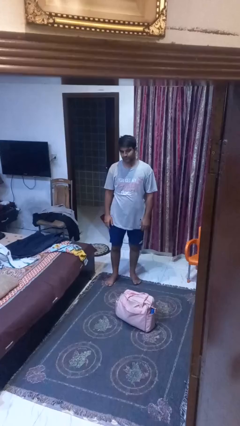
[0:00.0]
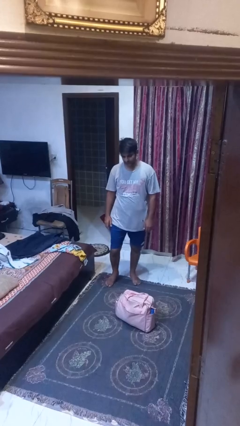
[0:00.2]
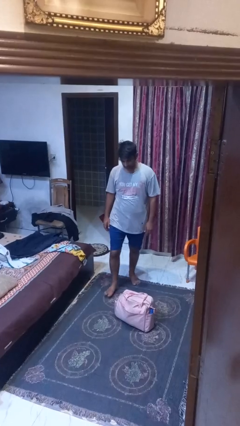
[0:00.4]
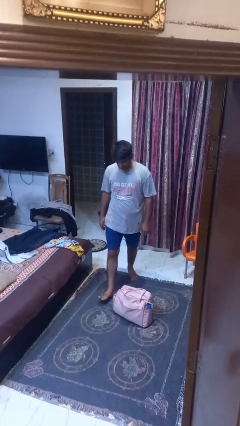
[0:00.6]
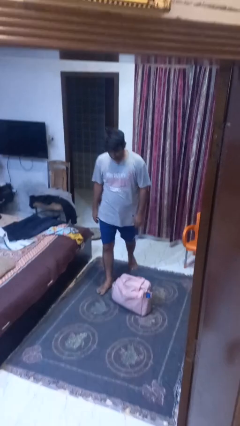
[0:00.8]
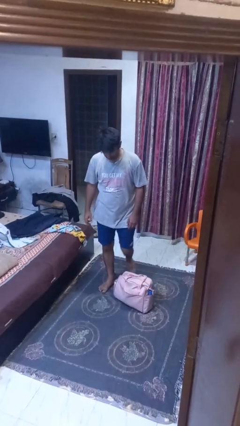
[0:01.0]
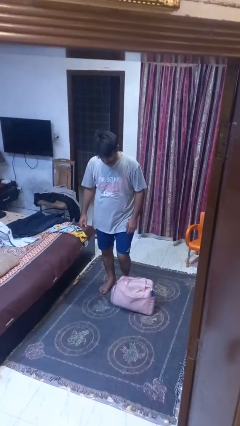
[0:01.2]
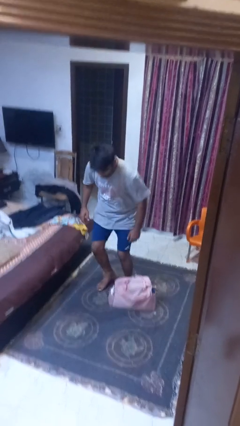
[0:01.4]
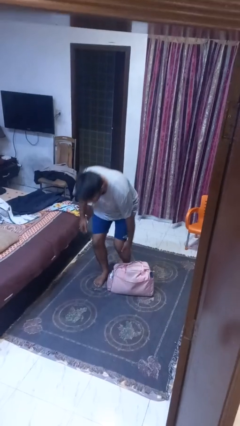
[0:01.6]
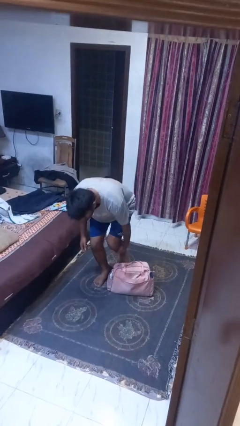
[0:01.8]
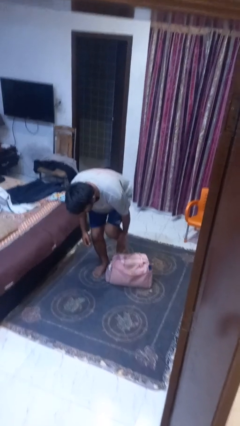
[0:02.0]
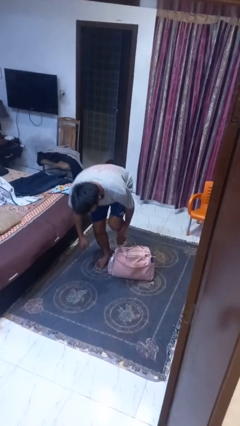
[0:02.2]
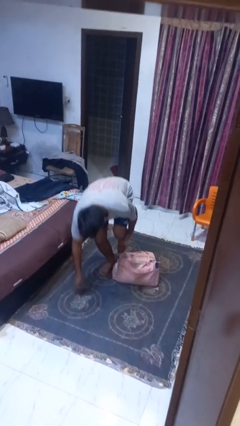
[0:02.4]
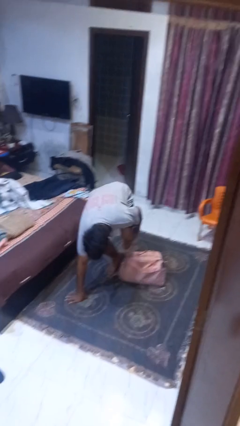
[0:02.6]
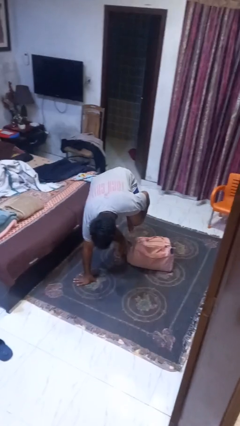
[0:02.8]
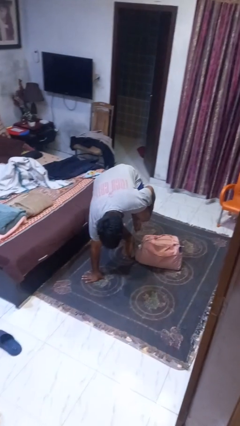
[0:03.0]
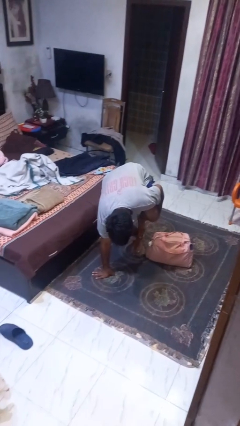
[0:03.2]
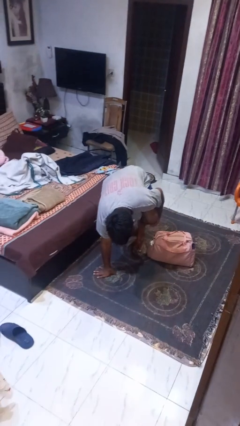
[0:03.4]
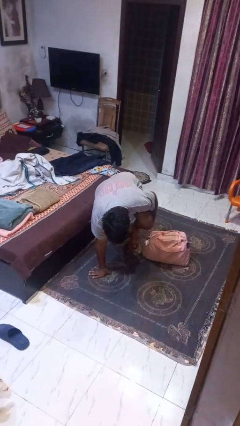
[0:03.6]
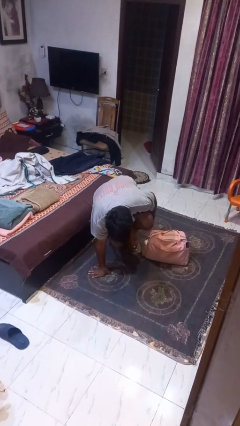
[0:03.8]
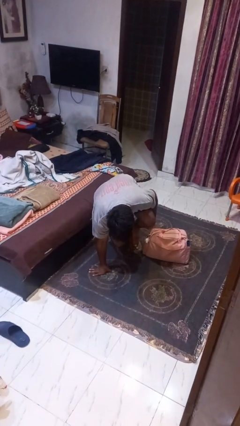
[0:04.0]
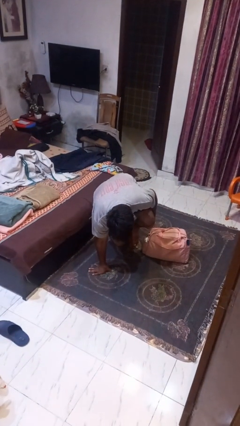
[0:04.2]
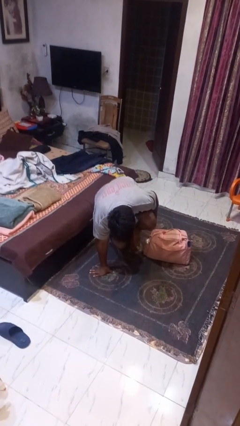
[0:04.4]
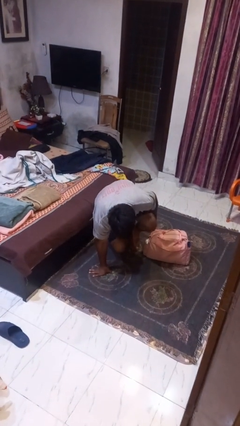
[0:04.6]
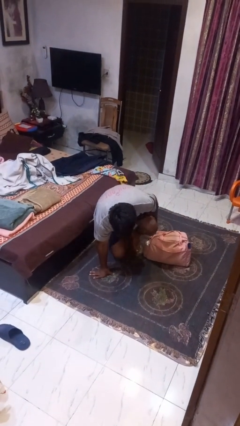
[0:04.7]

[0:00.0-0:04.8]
person trips on object on floor

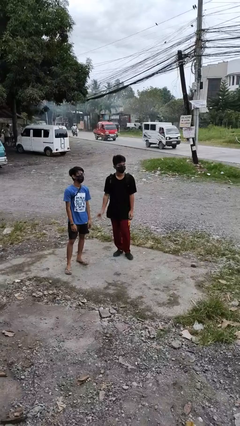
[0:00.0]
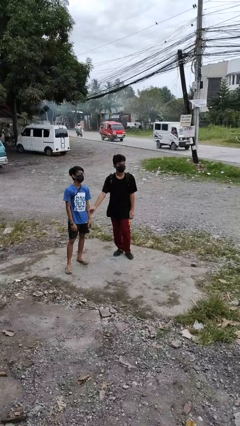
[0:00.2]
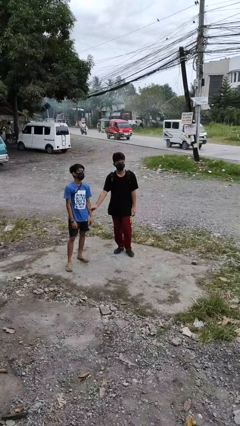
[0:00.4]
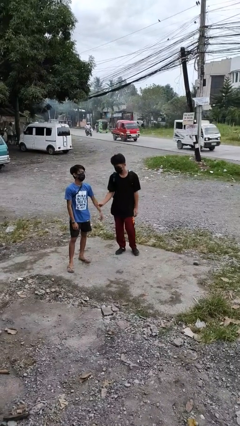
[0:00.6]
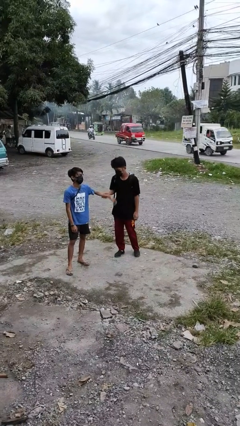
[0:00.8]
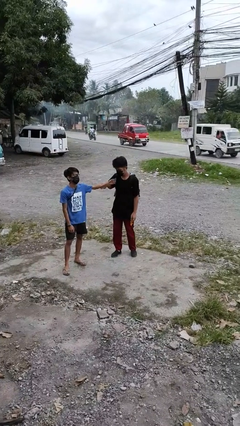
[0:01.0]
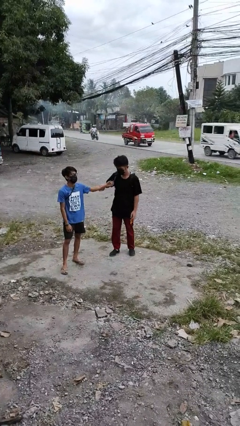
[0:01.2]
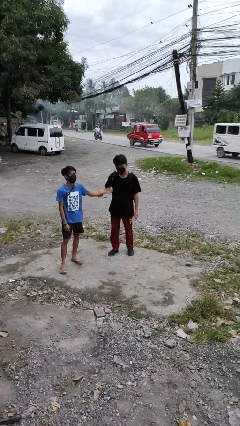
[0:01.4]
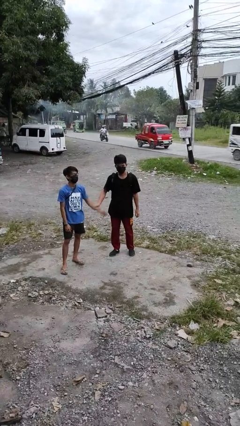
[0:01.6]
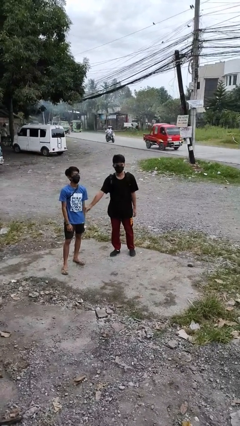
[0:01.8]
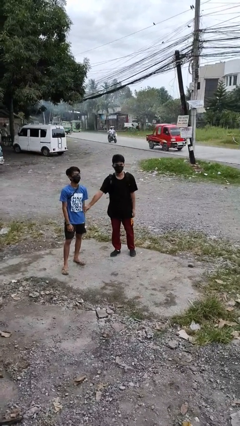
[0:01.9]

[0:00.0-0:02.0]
person grabs person by forearm

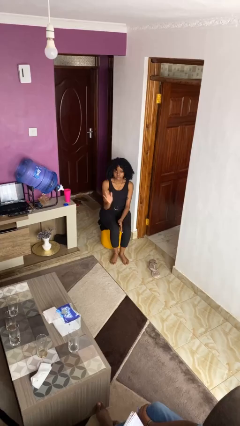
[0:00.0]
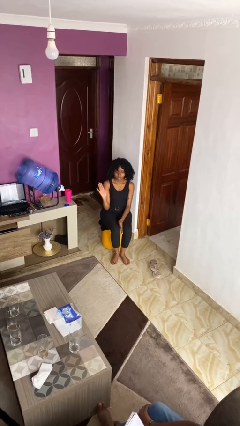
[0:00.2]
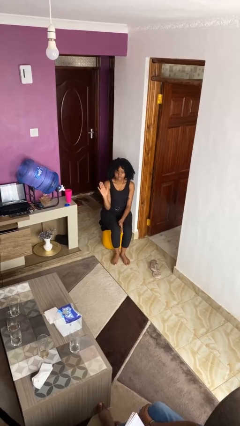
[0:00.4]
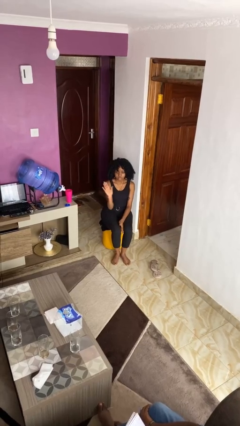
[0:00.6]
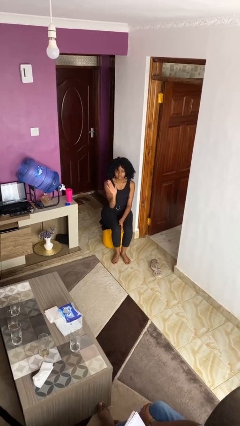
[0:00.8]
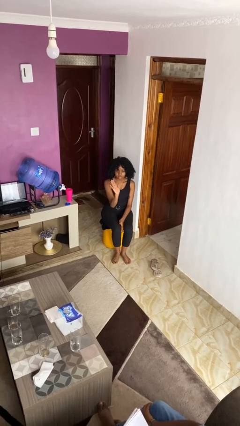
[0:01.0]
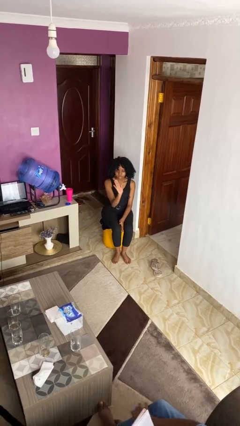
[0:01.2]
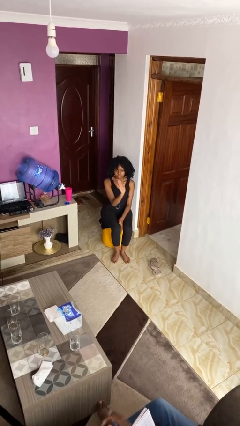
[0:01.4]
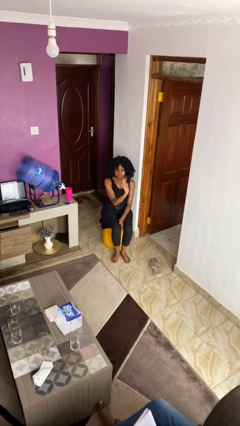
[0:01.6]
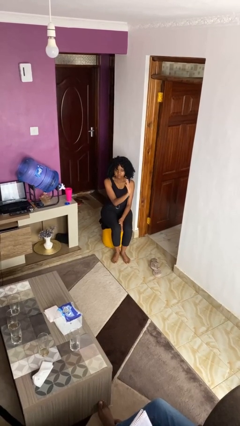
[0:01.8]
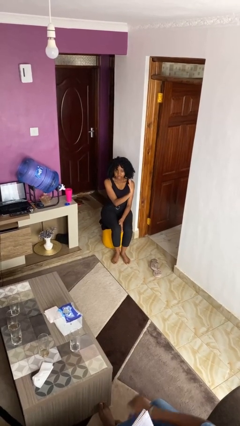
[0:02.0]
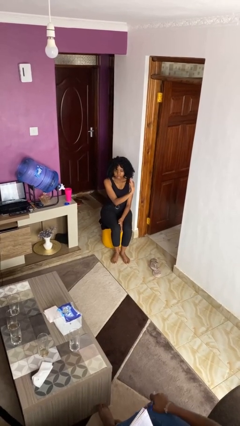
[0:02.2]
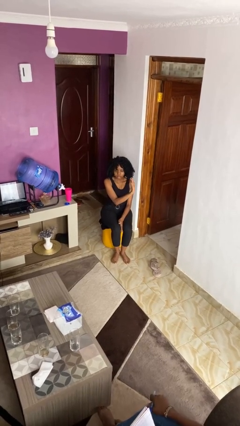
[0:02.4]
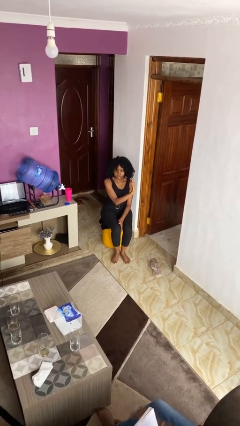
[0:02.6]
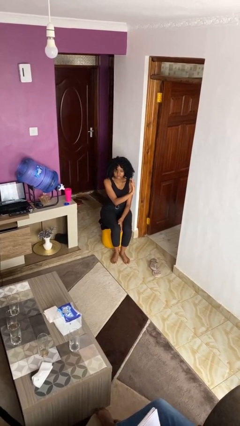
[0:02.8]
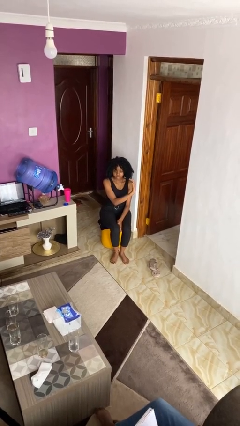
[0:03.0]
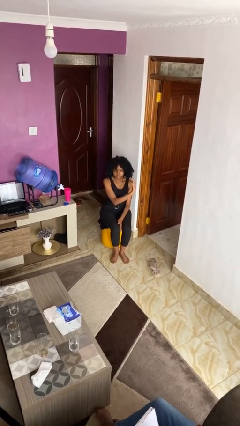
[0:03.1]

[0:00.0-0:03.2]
person gestures swipe left

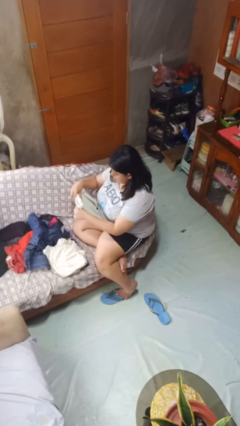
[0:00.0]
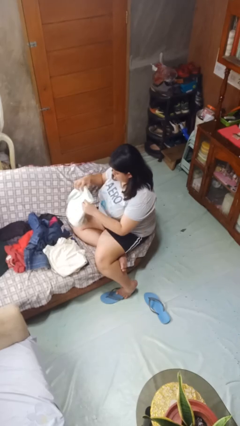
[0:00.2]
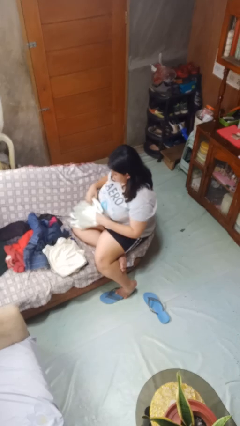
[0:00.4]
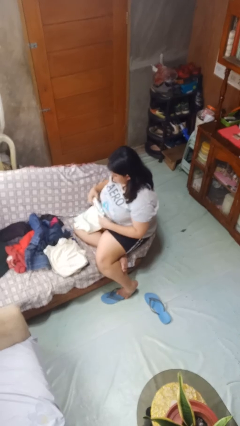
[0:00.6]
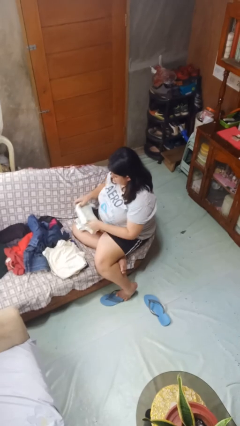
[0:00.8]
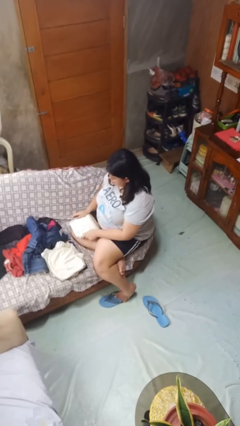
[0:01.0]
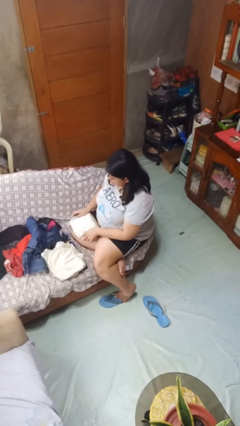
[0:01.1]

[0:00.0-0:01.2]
person folds shirt

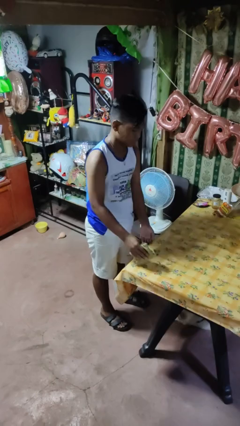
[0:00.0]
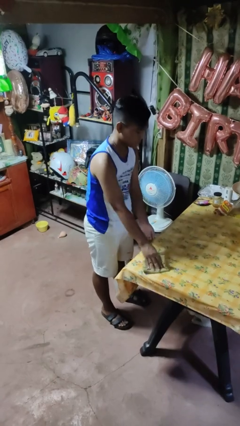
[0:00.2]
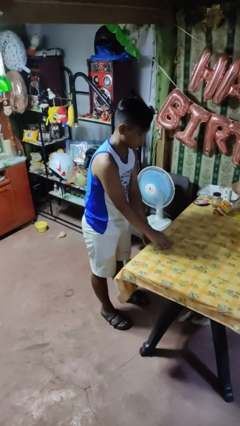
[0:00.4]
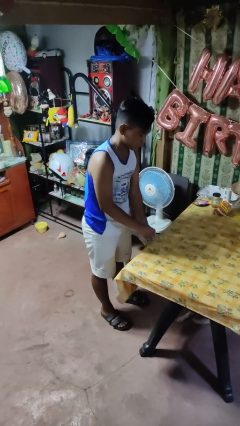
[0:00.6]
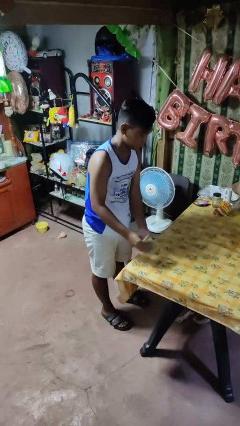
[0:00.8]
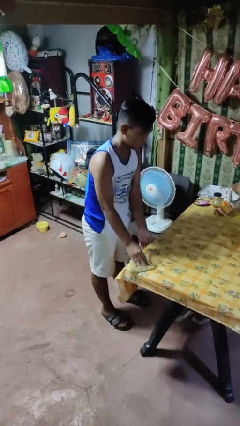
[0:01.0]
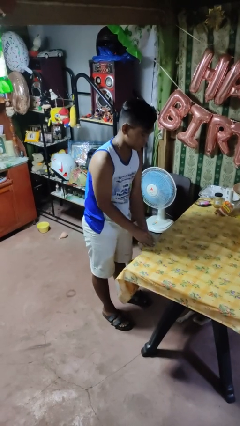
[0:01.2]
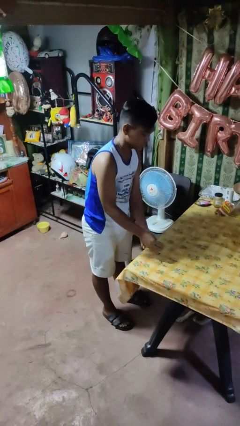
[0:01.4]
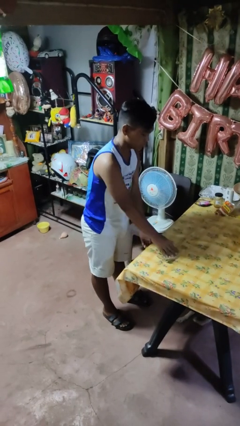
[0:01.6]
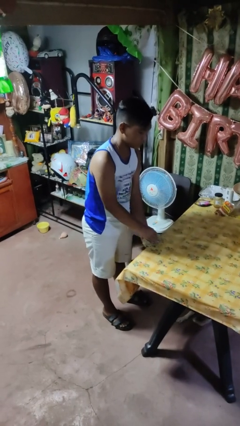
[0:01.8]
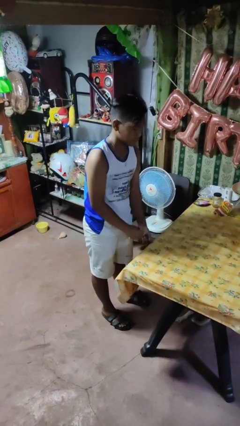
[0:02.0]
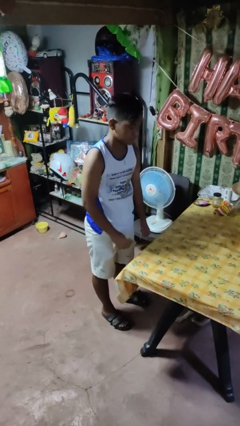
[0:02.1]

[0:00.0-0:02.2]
person cleans table with rag

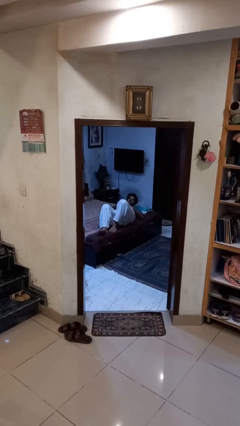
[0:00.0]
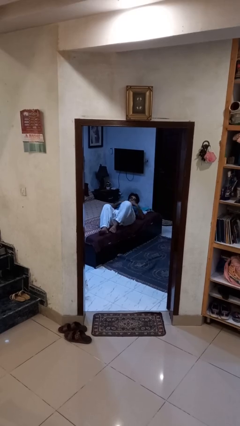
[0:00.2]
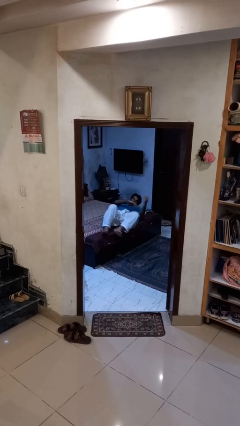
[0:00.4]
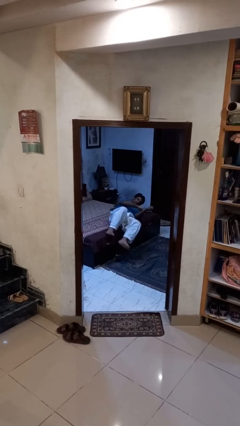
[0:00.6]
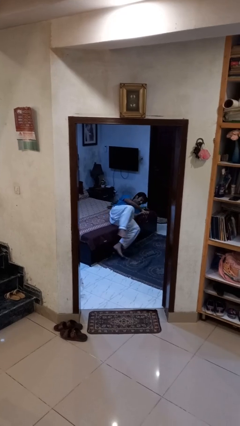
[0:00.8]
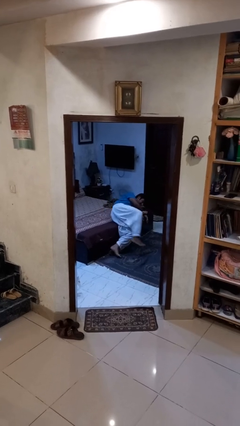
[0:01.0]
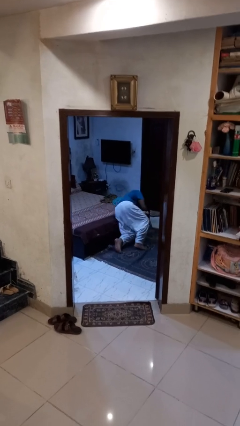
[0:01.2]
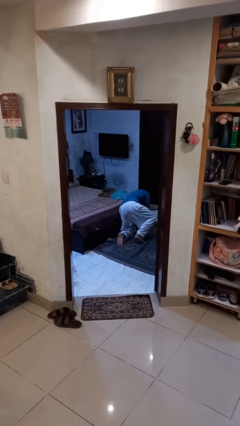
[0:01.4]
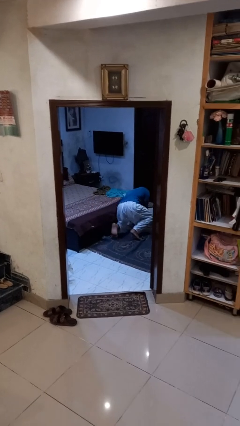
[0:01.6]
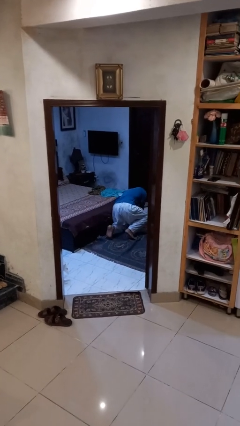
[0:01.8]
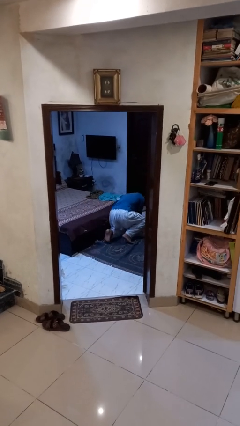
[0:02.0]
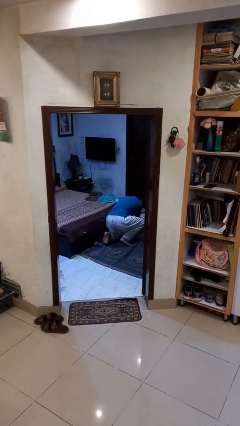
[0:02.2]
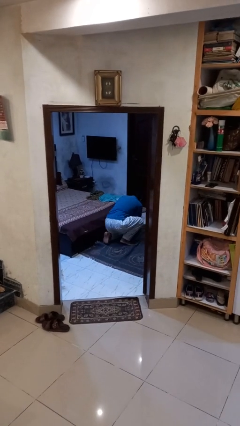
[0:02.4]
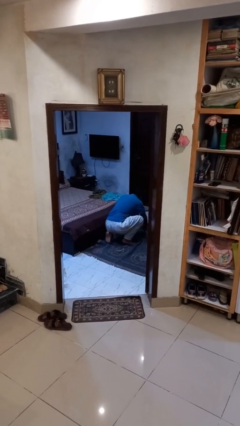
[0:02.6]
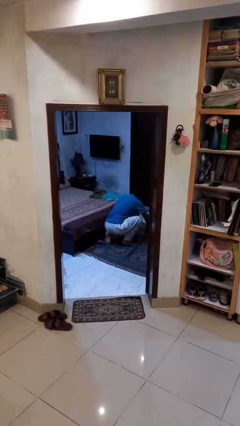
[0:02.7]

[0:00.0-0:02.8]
person falls from bed

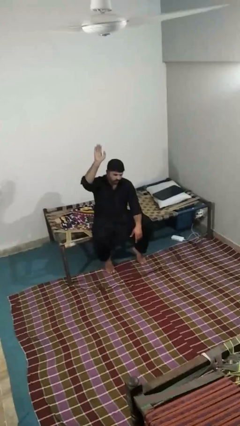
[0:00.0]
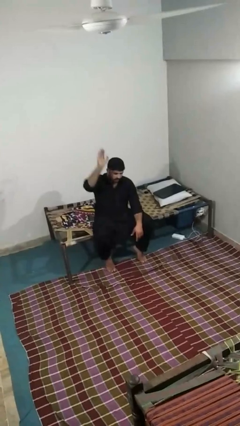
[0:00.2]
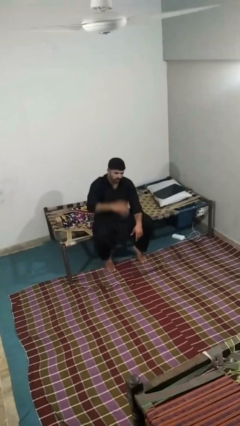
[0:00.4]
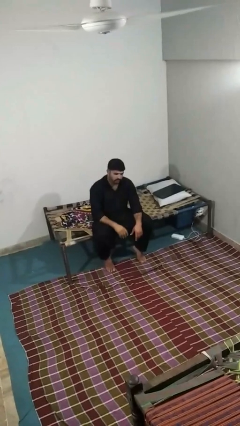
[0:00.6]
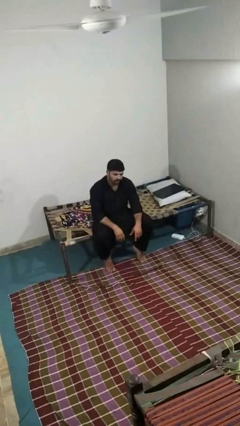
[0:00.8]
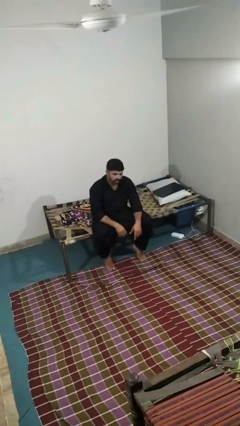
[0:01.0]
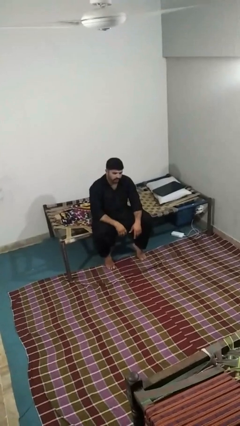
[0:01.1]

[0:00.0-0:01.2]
person gestures lower hand
